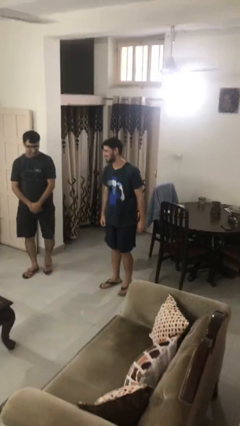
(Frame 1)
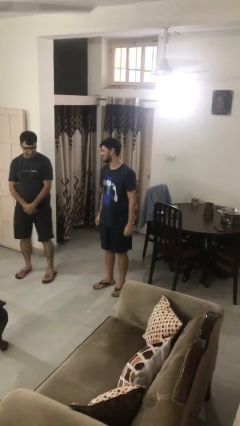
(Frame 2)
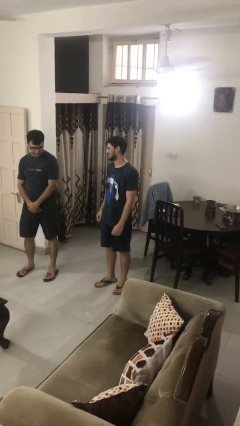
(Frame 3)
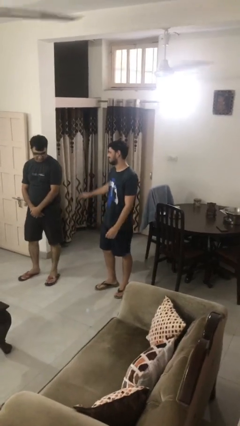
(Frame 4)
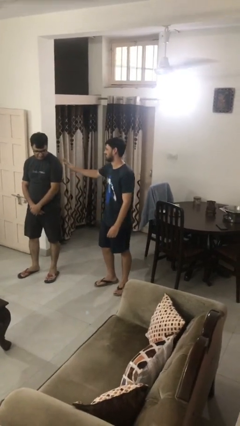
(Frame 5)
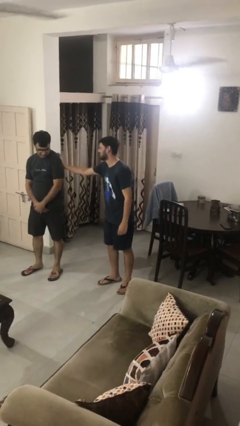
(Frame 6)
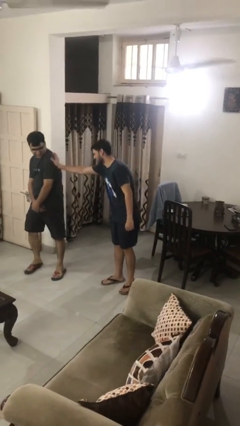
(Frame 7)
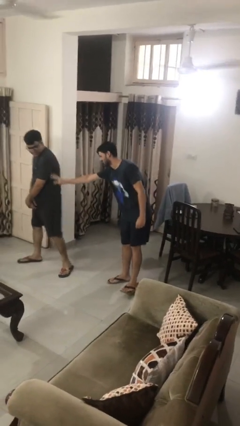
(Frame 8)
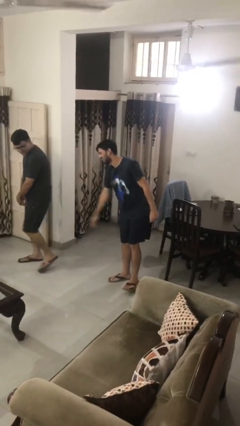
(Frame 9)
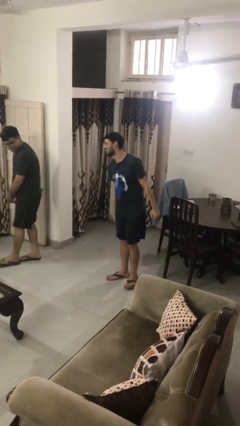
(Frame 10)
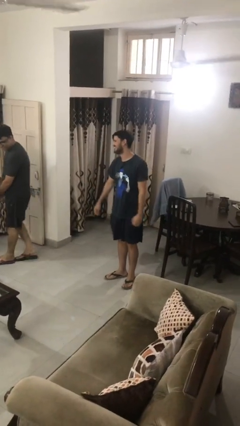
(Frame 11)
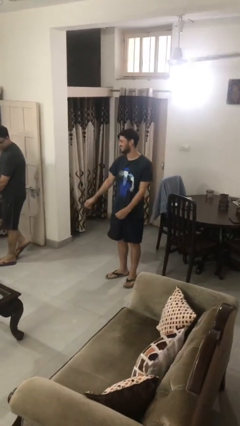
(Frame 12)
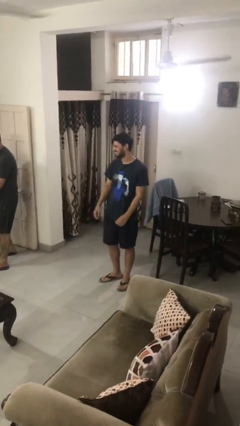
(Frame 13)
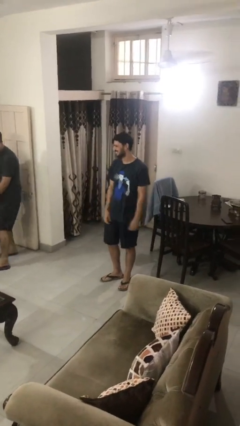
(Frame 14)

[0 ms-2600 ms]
person shoves person

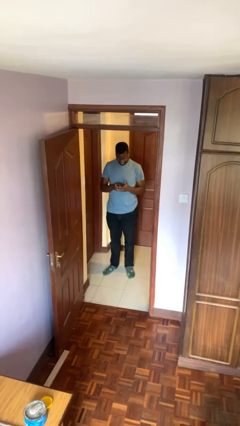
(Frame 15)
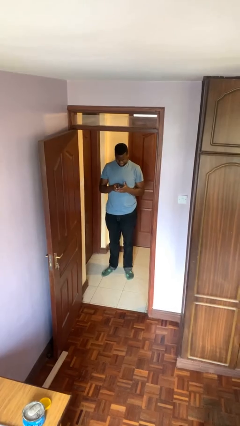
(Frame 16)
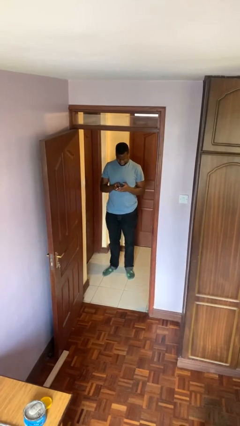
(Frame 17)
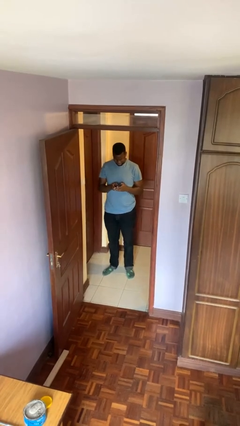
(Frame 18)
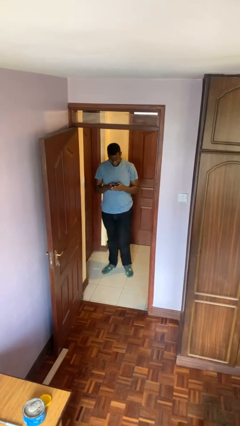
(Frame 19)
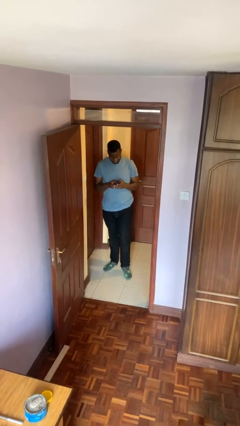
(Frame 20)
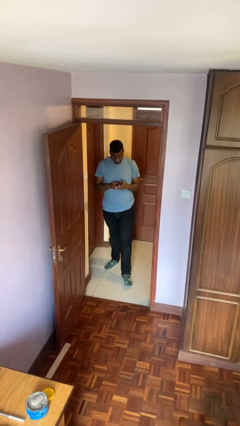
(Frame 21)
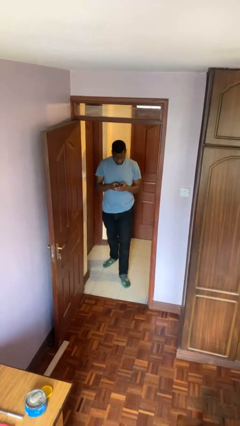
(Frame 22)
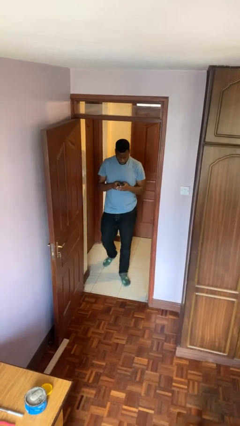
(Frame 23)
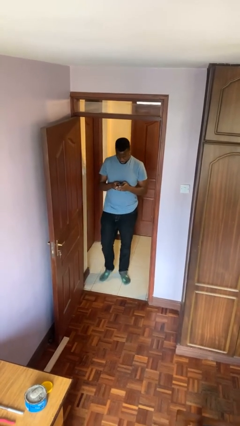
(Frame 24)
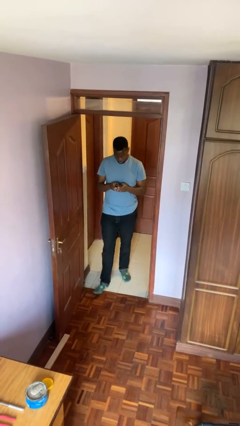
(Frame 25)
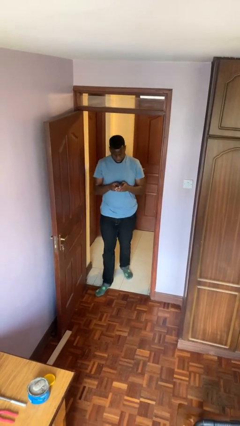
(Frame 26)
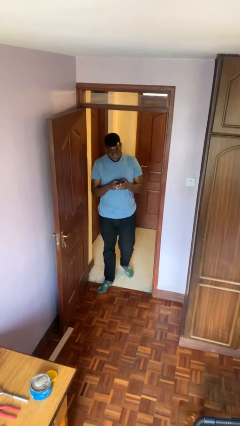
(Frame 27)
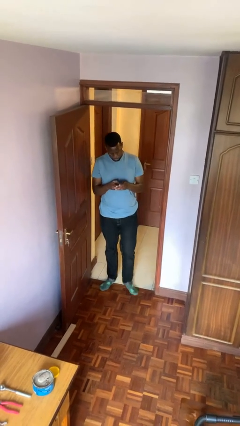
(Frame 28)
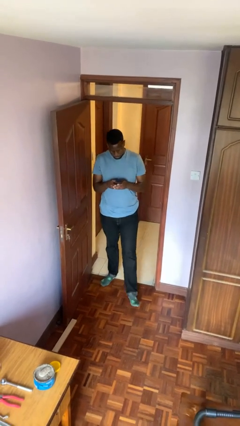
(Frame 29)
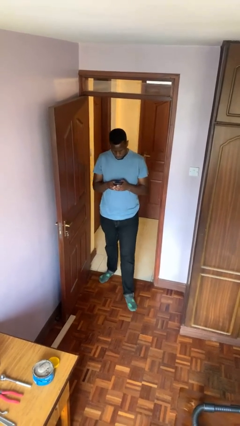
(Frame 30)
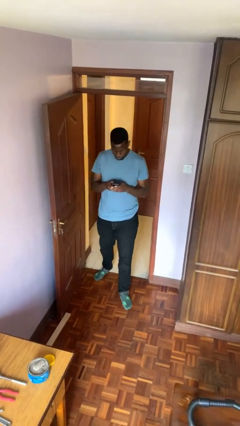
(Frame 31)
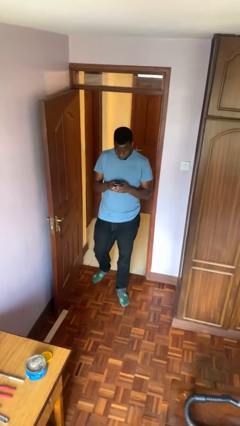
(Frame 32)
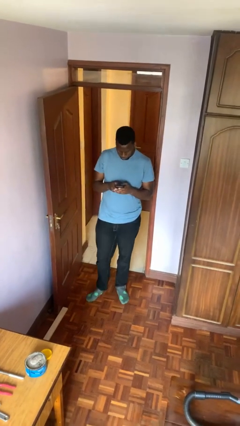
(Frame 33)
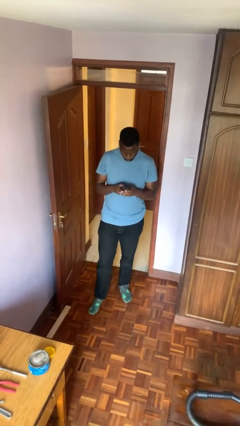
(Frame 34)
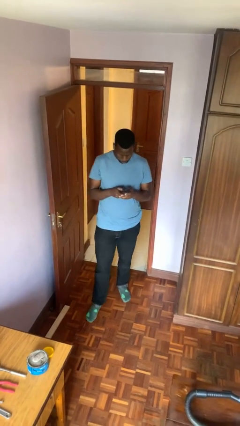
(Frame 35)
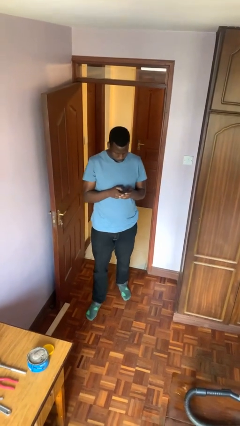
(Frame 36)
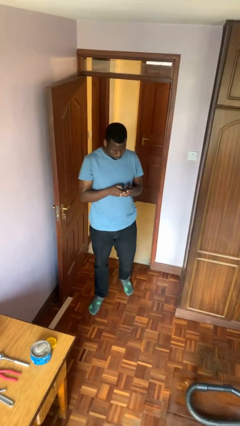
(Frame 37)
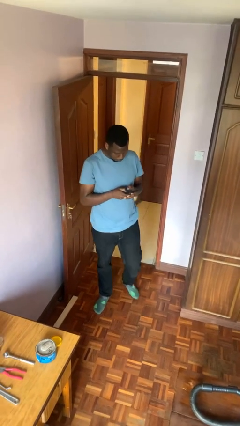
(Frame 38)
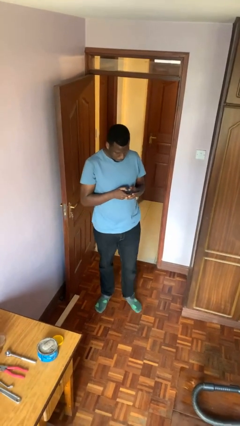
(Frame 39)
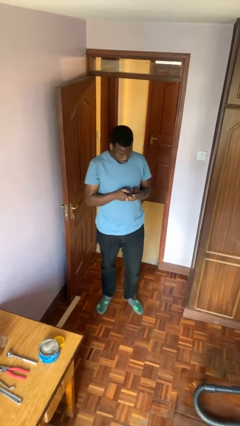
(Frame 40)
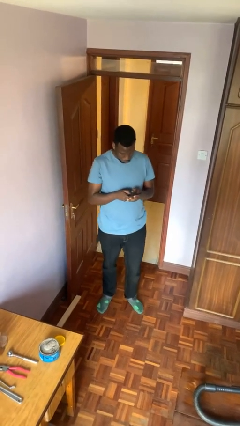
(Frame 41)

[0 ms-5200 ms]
person enters scene through structure

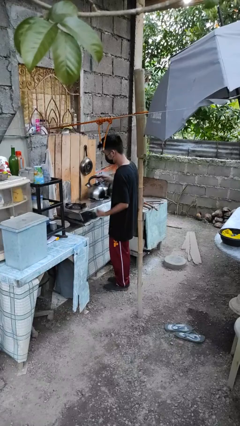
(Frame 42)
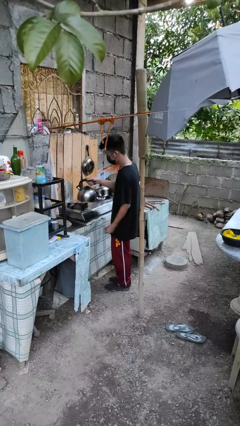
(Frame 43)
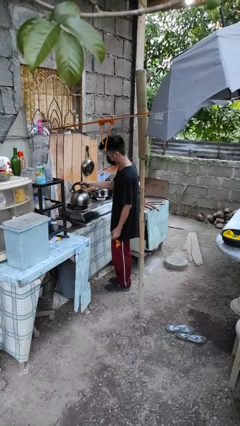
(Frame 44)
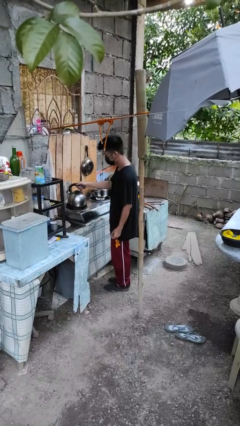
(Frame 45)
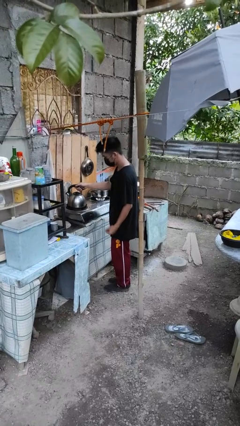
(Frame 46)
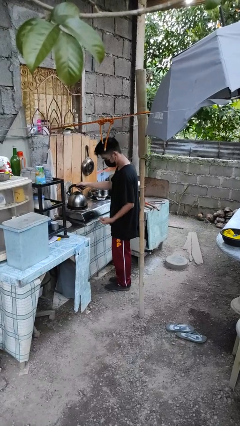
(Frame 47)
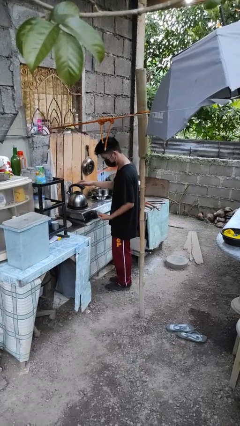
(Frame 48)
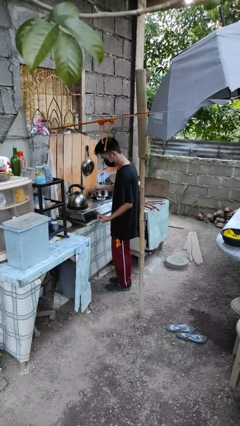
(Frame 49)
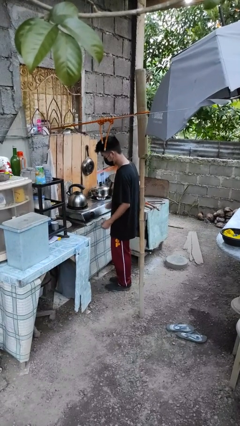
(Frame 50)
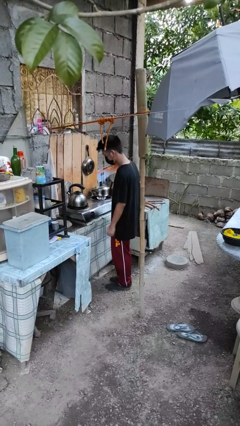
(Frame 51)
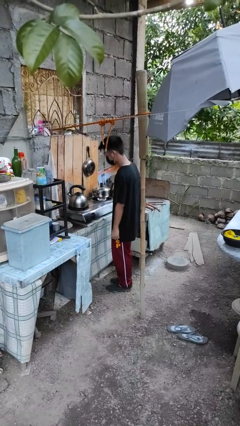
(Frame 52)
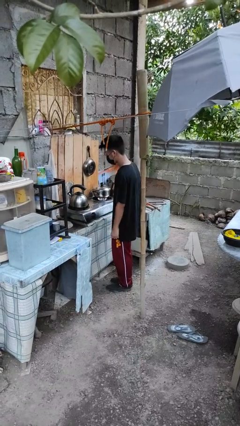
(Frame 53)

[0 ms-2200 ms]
person puts down object on countertop

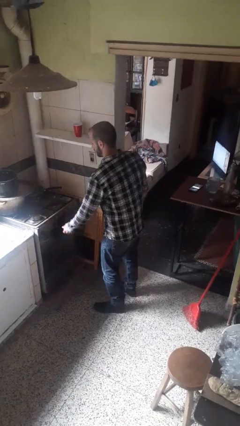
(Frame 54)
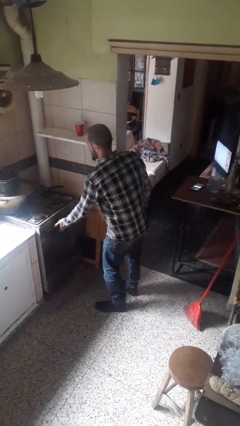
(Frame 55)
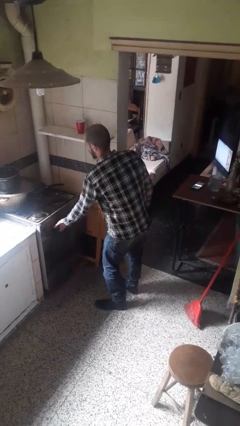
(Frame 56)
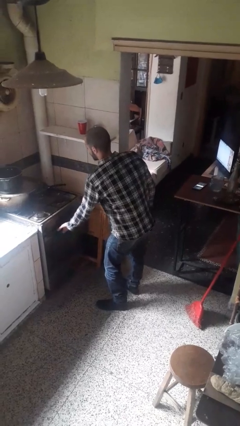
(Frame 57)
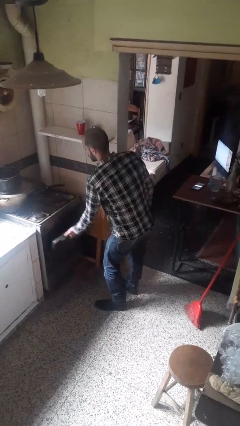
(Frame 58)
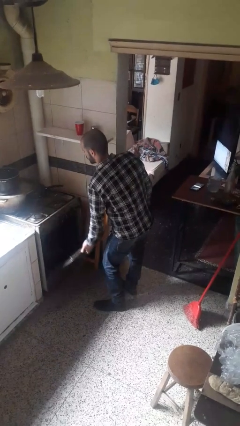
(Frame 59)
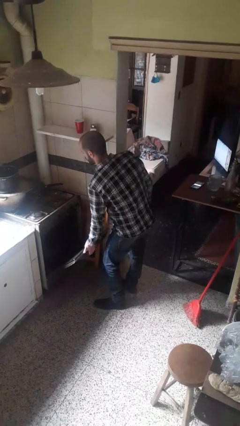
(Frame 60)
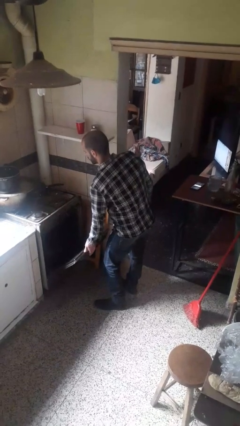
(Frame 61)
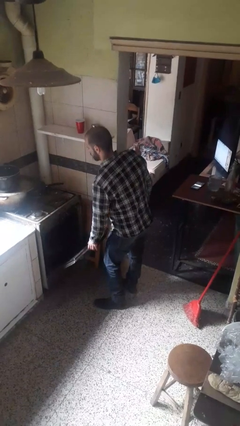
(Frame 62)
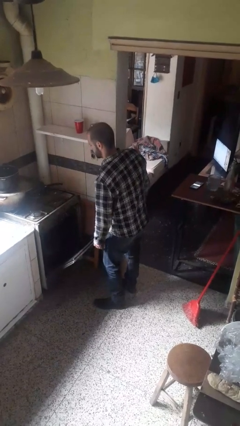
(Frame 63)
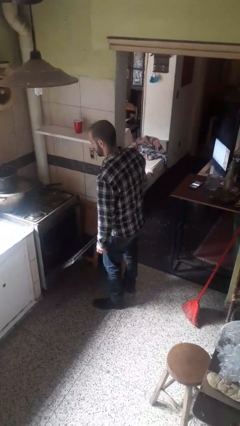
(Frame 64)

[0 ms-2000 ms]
person opens oven door

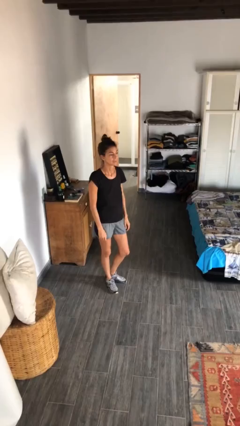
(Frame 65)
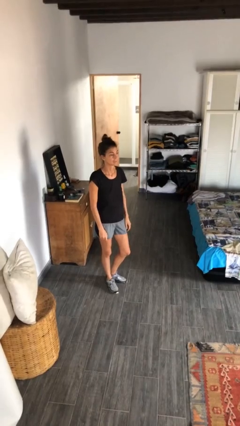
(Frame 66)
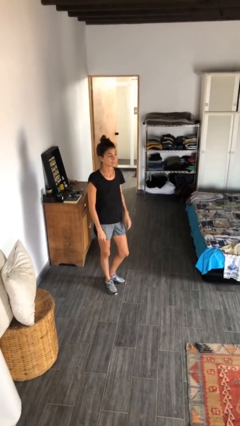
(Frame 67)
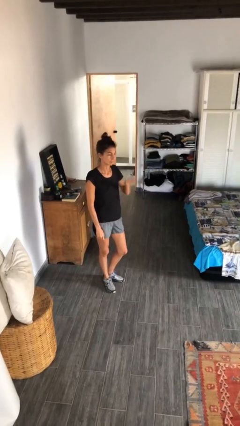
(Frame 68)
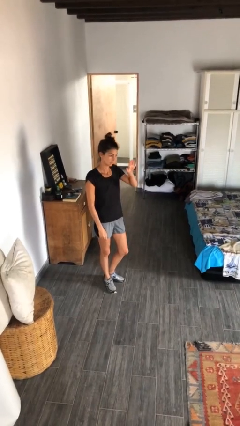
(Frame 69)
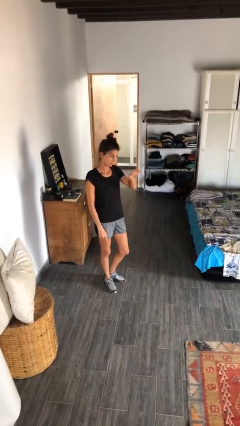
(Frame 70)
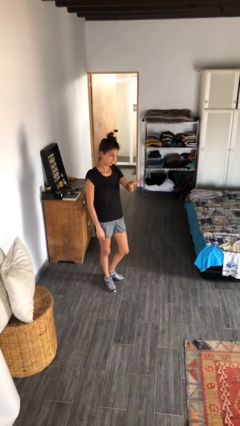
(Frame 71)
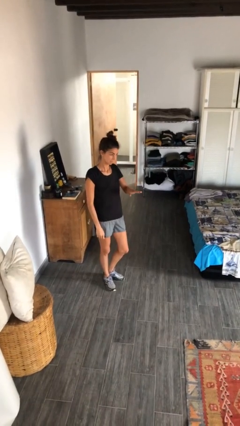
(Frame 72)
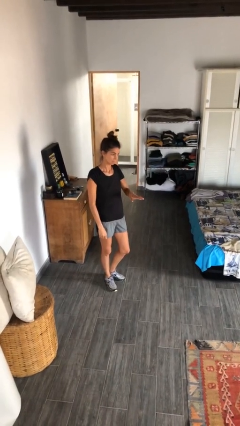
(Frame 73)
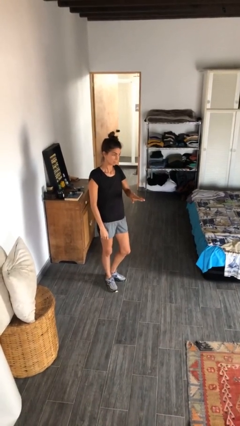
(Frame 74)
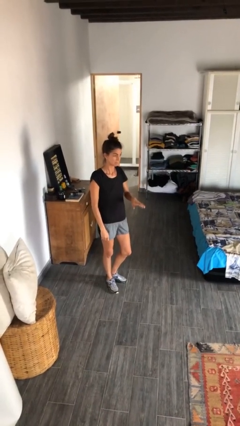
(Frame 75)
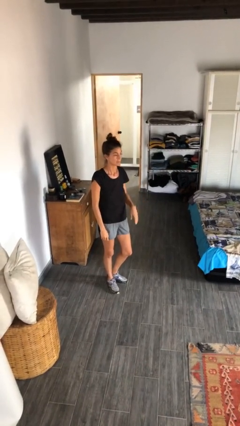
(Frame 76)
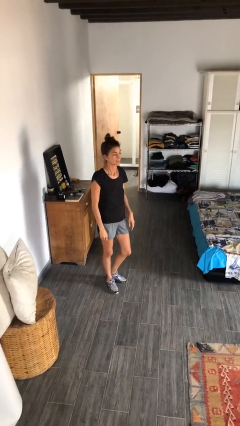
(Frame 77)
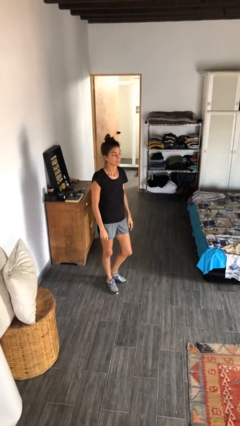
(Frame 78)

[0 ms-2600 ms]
person gestures swipe down

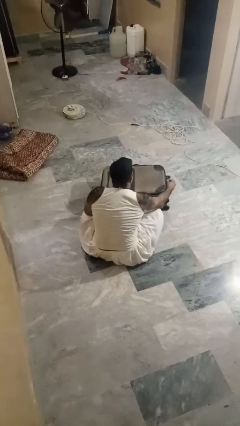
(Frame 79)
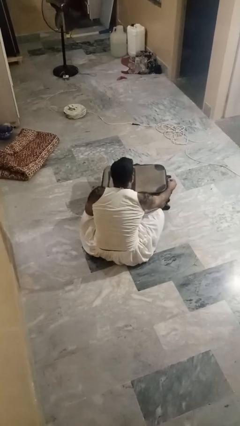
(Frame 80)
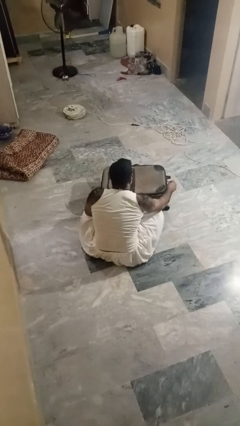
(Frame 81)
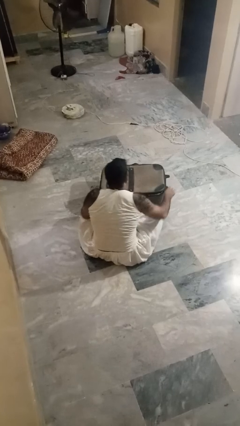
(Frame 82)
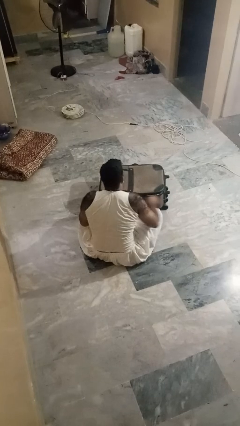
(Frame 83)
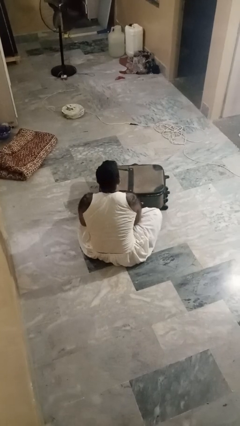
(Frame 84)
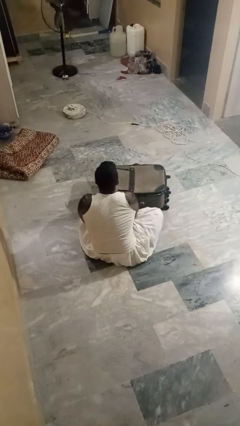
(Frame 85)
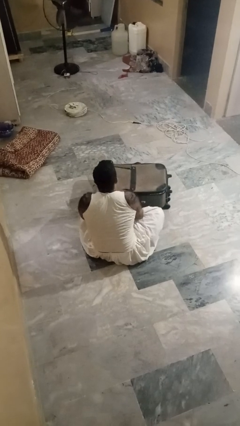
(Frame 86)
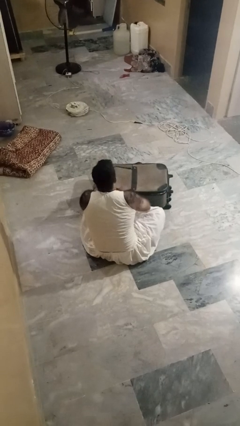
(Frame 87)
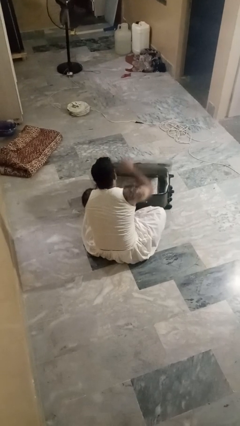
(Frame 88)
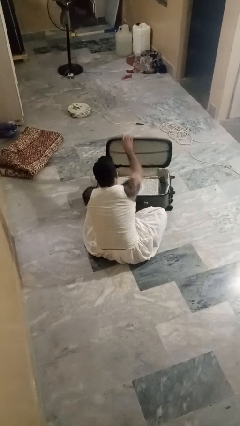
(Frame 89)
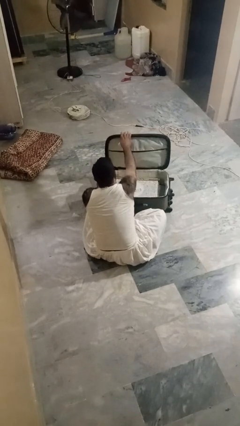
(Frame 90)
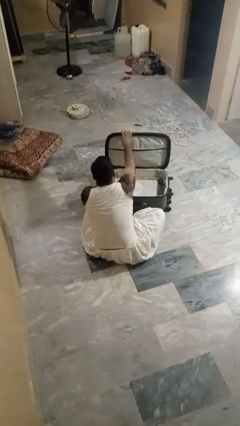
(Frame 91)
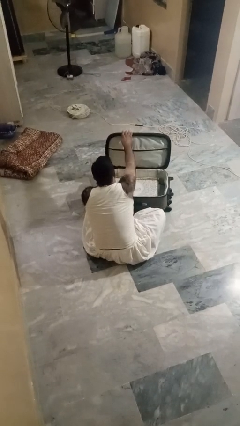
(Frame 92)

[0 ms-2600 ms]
person opens suitcase

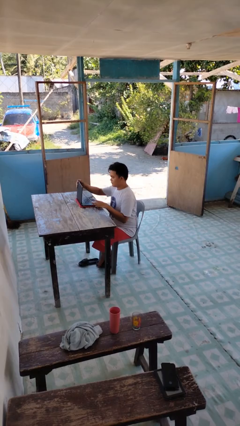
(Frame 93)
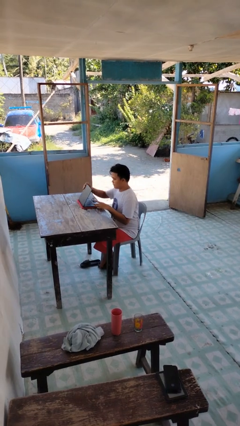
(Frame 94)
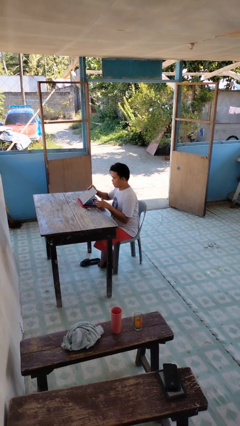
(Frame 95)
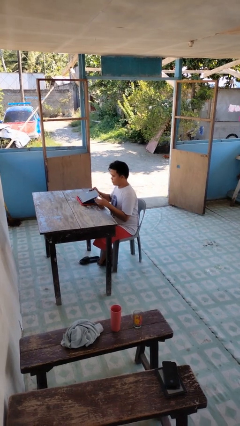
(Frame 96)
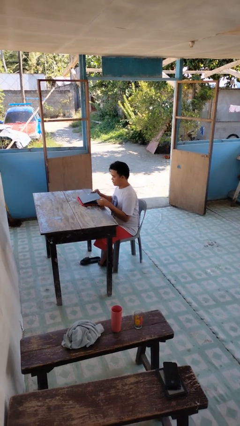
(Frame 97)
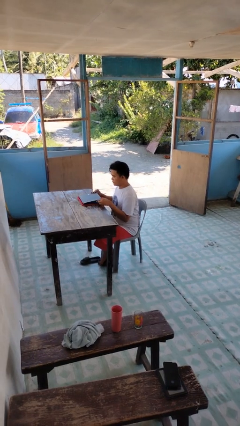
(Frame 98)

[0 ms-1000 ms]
person closes laptop
